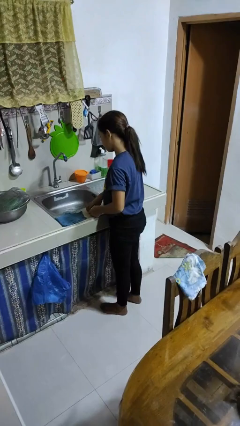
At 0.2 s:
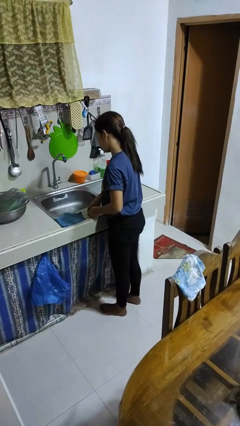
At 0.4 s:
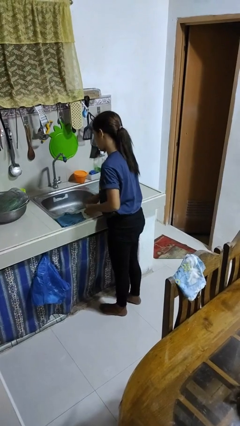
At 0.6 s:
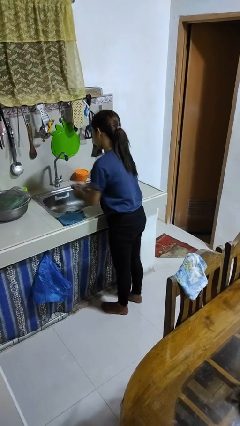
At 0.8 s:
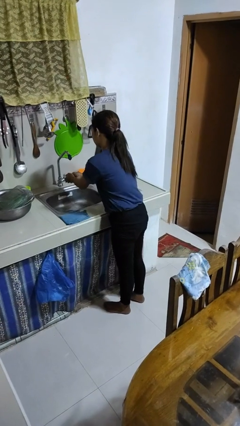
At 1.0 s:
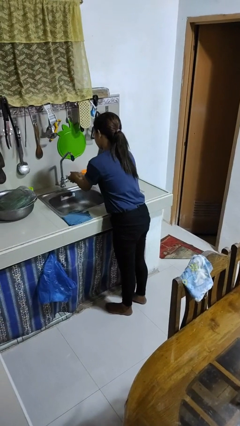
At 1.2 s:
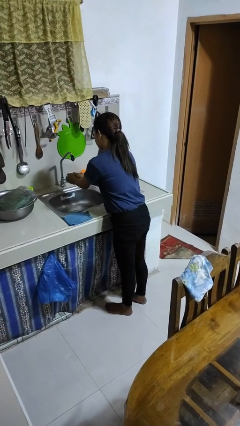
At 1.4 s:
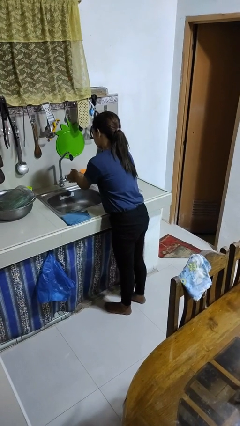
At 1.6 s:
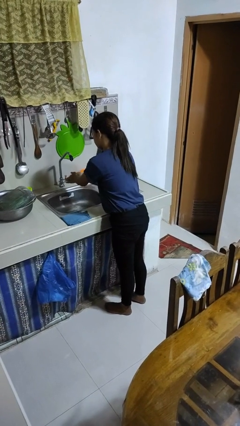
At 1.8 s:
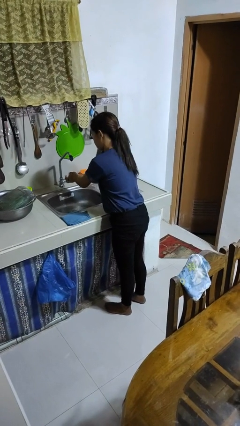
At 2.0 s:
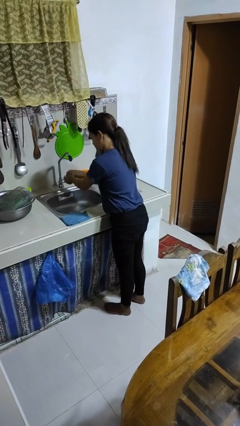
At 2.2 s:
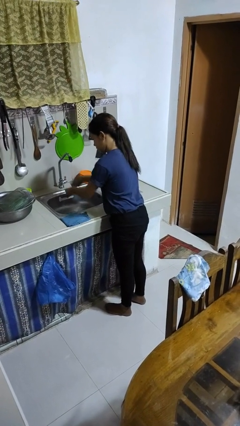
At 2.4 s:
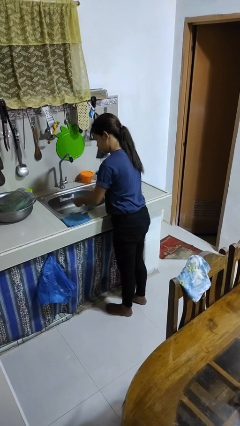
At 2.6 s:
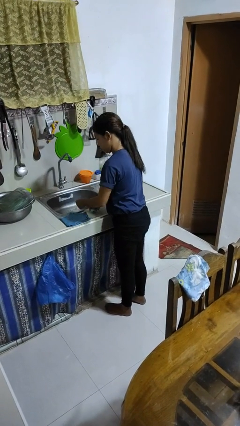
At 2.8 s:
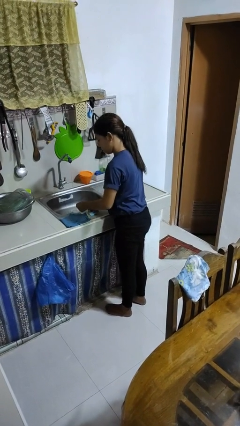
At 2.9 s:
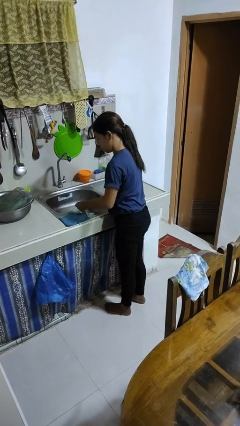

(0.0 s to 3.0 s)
person washes hands

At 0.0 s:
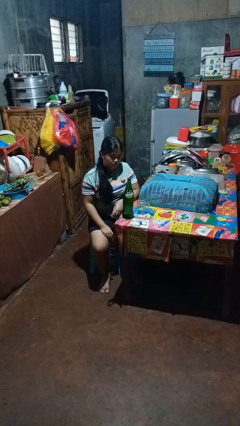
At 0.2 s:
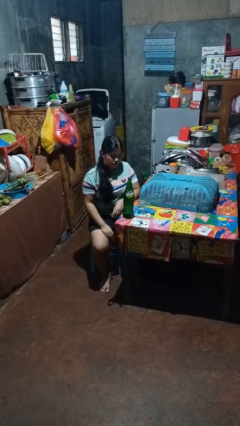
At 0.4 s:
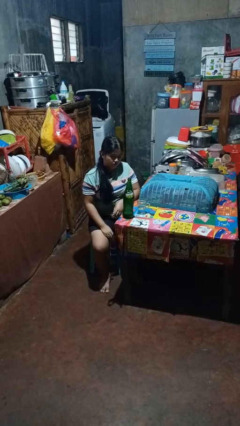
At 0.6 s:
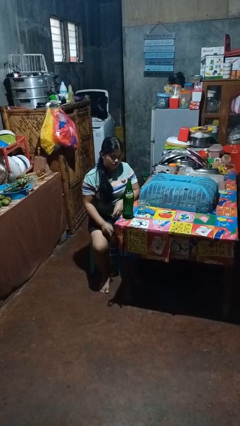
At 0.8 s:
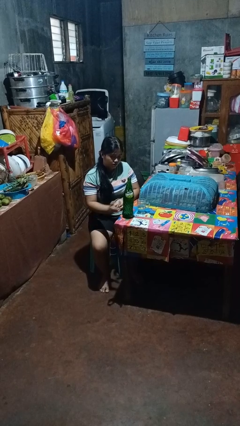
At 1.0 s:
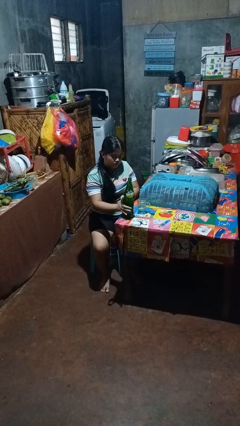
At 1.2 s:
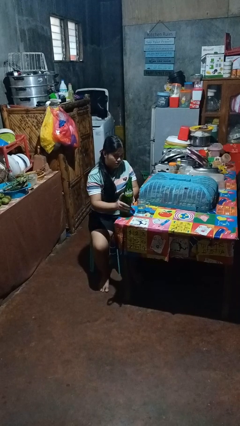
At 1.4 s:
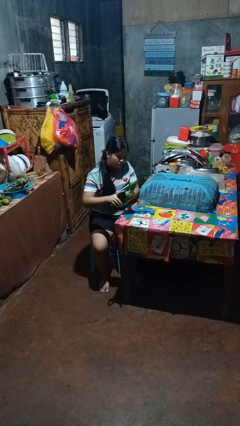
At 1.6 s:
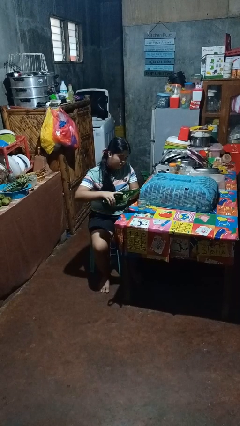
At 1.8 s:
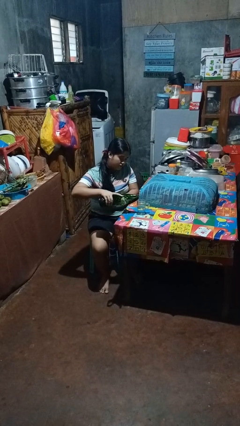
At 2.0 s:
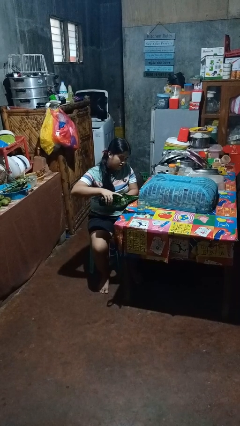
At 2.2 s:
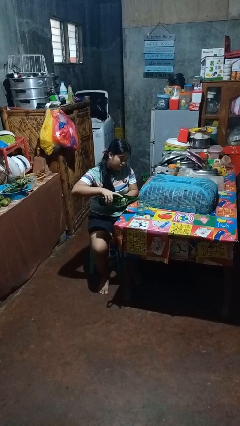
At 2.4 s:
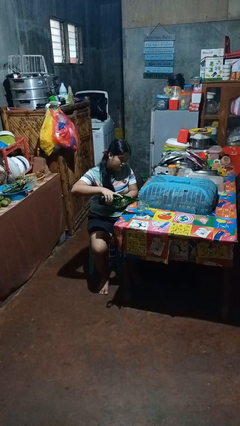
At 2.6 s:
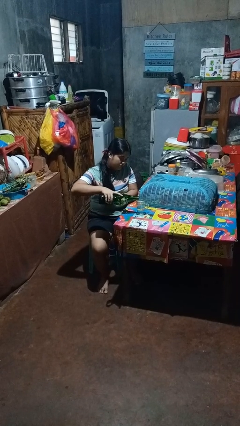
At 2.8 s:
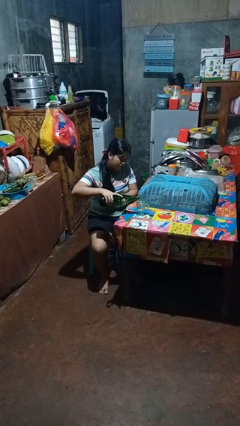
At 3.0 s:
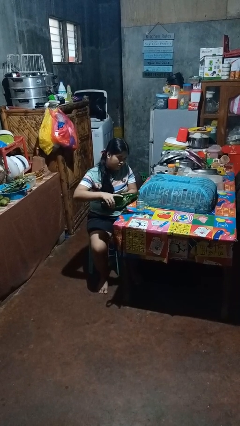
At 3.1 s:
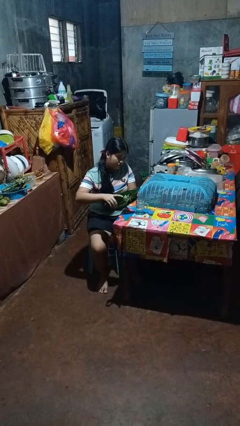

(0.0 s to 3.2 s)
person pours liquid into cup

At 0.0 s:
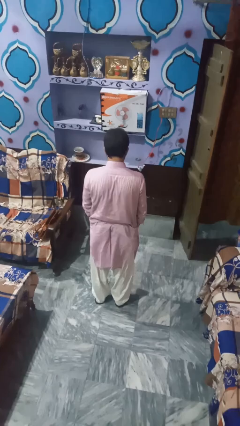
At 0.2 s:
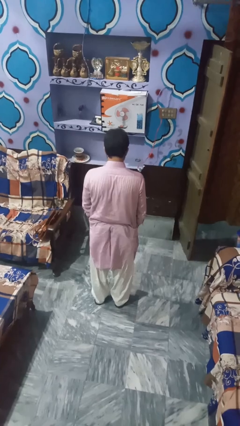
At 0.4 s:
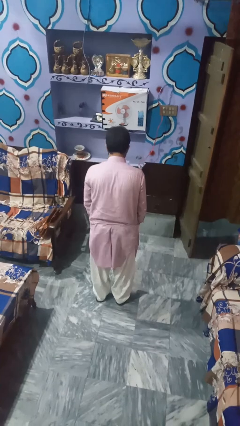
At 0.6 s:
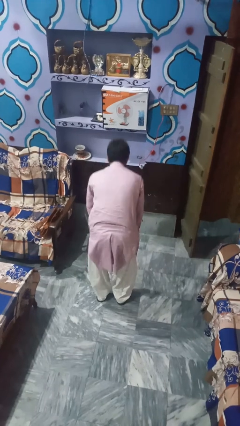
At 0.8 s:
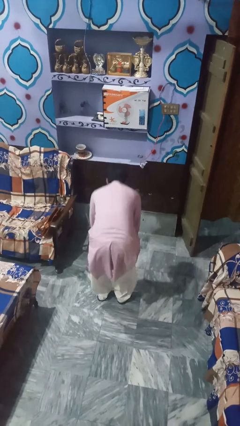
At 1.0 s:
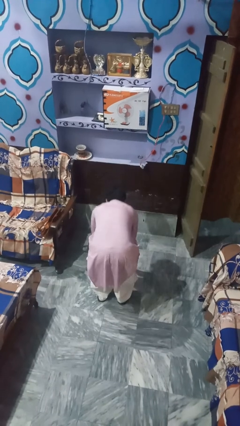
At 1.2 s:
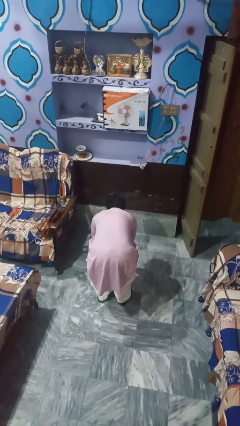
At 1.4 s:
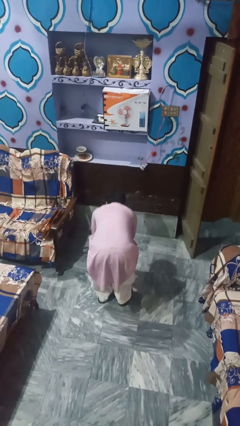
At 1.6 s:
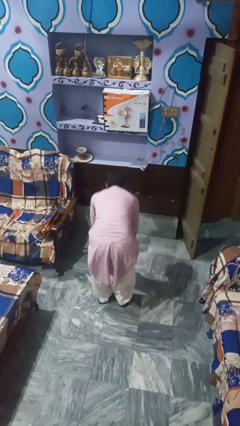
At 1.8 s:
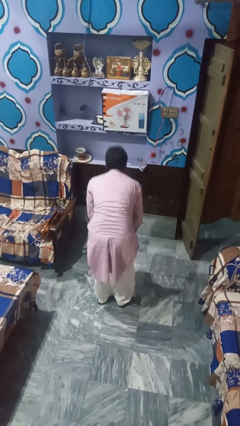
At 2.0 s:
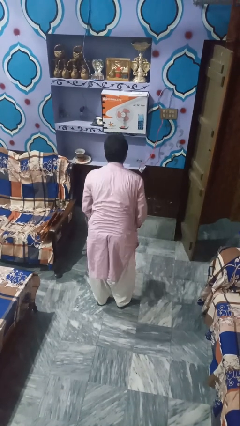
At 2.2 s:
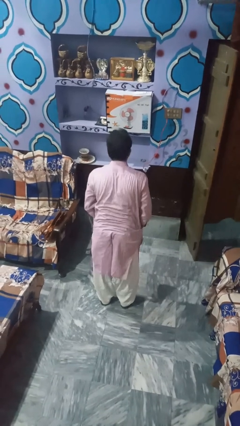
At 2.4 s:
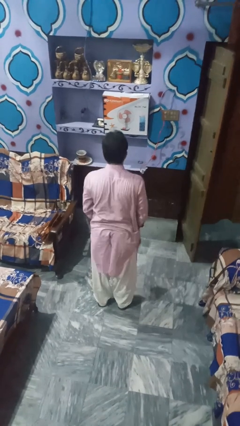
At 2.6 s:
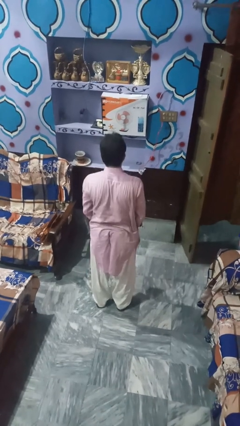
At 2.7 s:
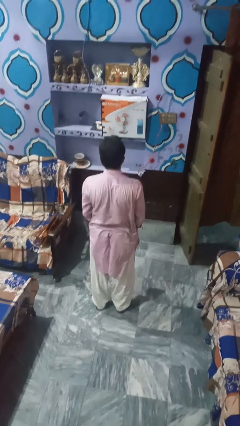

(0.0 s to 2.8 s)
person picks up object from floor

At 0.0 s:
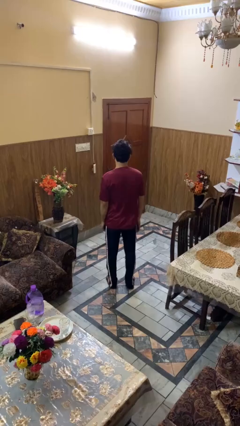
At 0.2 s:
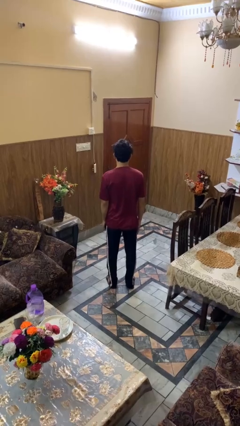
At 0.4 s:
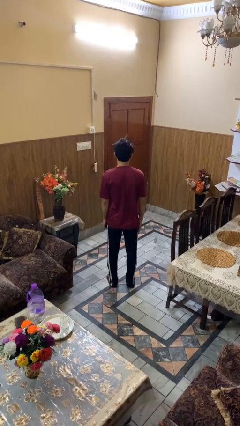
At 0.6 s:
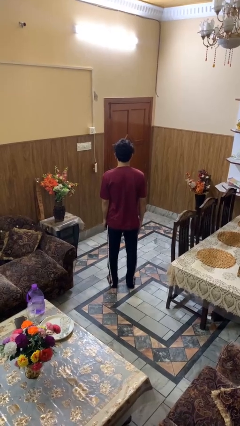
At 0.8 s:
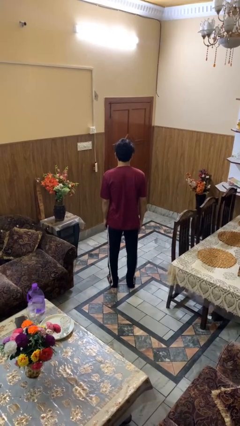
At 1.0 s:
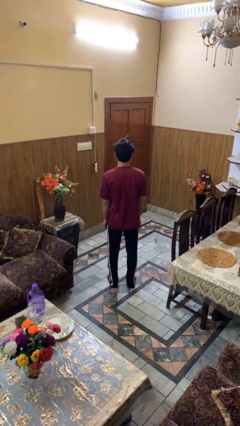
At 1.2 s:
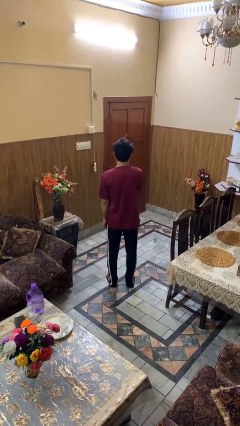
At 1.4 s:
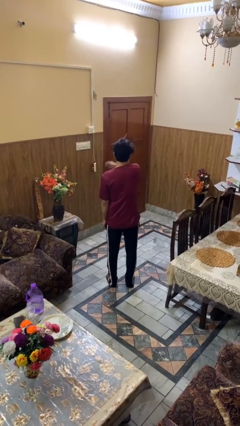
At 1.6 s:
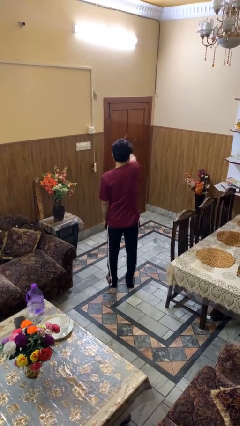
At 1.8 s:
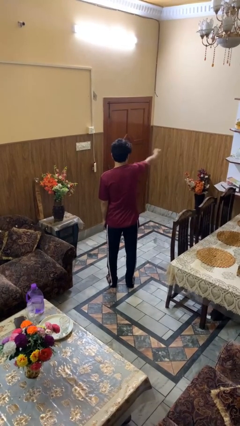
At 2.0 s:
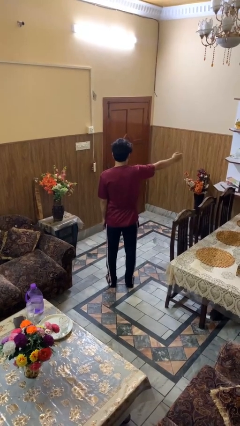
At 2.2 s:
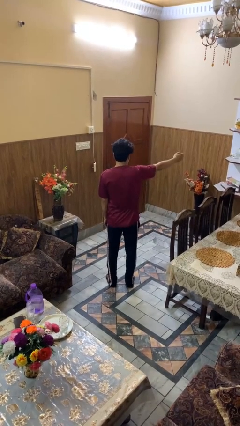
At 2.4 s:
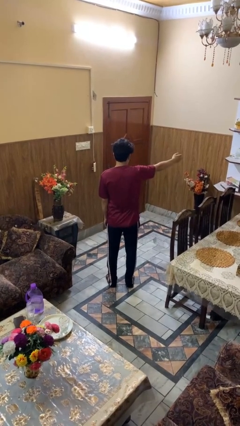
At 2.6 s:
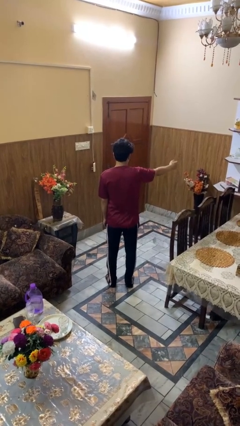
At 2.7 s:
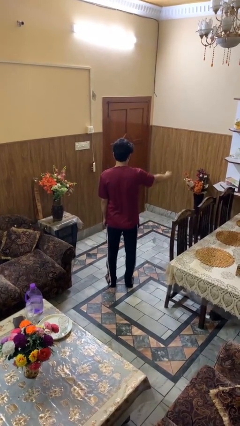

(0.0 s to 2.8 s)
person gestures swipe right

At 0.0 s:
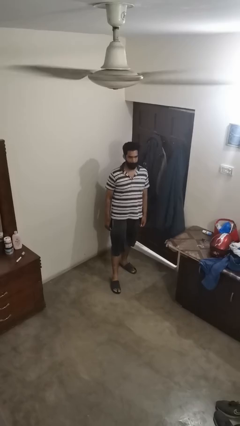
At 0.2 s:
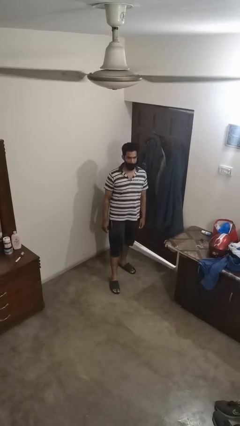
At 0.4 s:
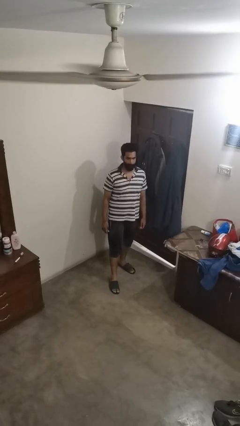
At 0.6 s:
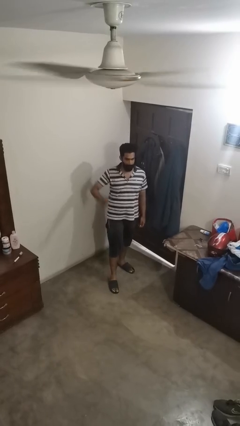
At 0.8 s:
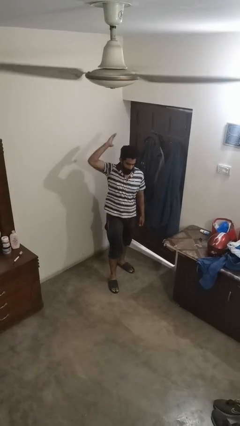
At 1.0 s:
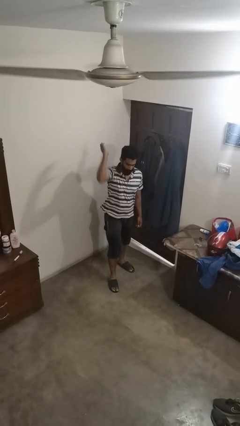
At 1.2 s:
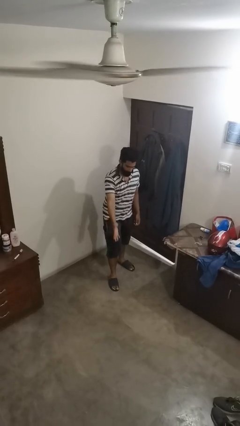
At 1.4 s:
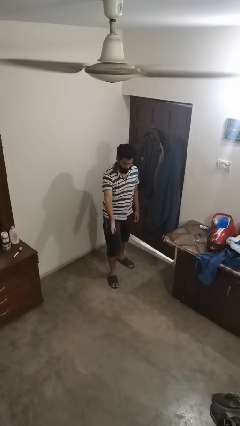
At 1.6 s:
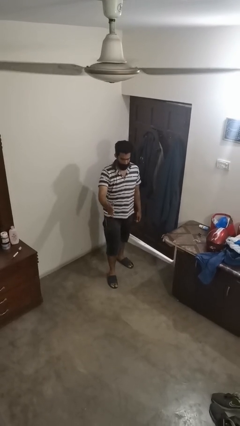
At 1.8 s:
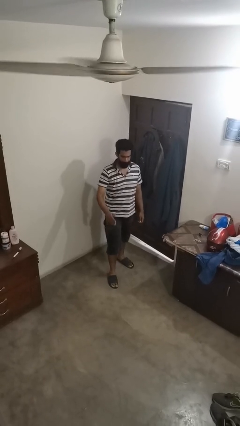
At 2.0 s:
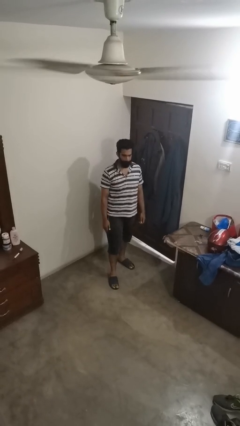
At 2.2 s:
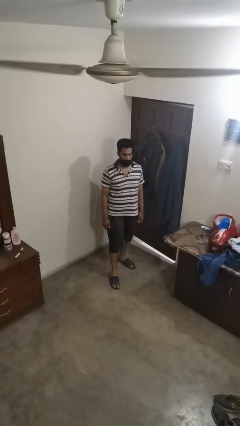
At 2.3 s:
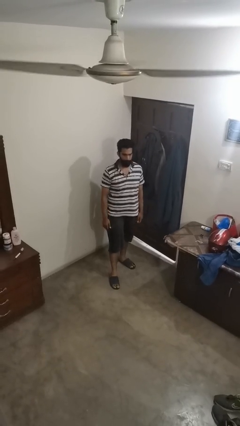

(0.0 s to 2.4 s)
person karate chop

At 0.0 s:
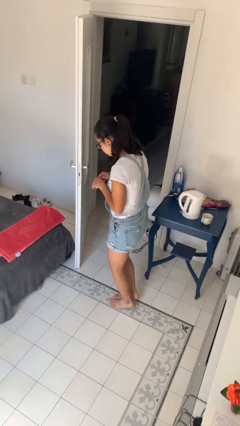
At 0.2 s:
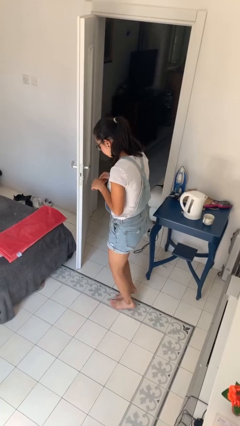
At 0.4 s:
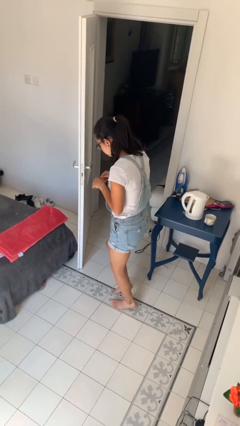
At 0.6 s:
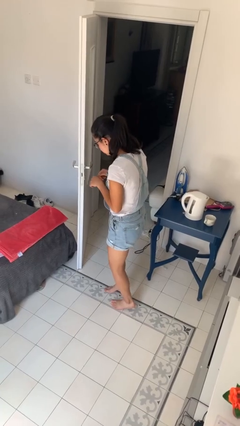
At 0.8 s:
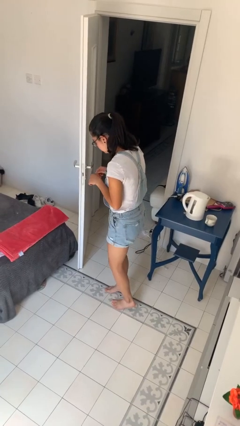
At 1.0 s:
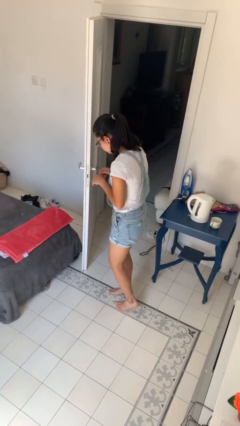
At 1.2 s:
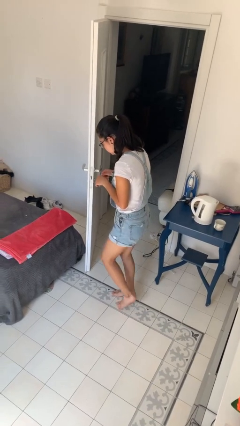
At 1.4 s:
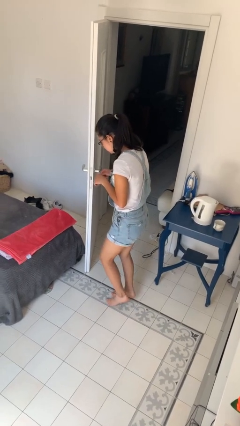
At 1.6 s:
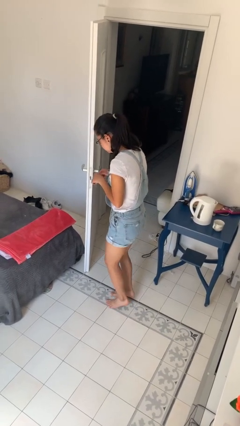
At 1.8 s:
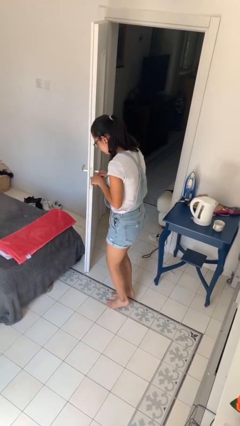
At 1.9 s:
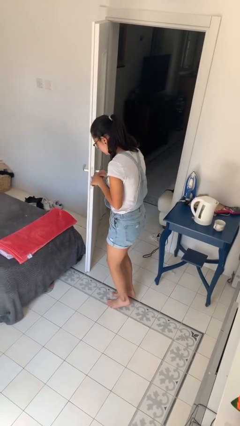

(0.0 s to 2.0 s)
person walks tiptoe

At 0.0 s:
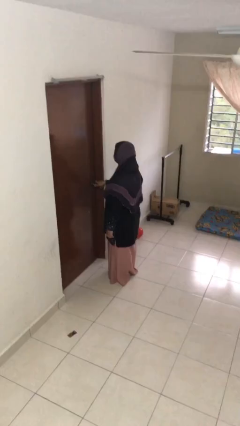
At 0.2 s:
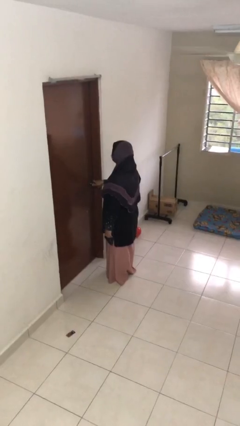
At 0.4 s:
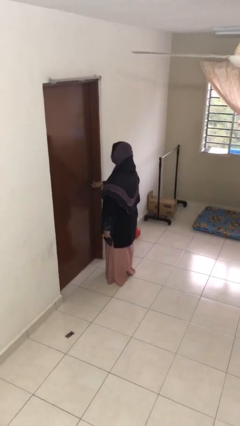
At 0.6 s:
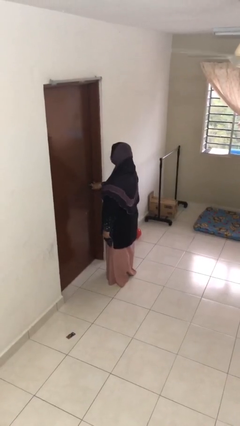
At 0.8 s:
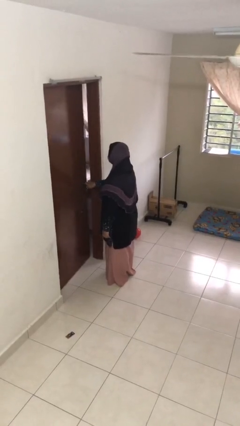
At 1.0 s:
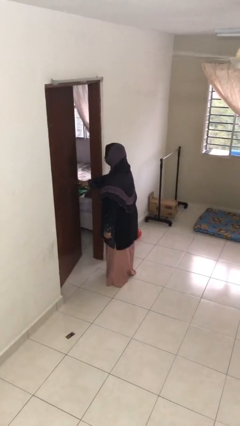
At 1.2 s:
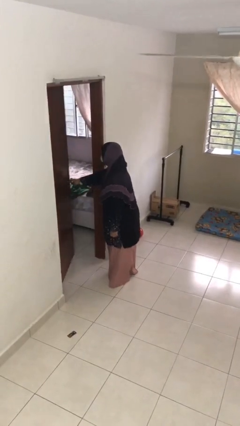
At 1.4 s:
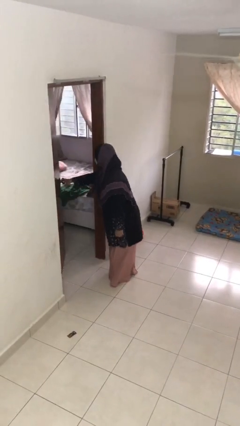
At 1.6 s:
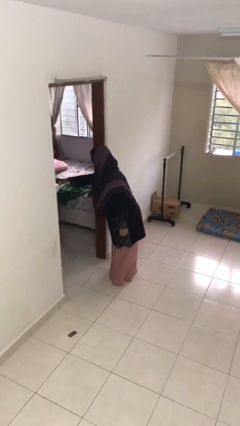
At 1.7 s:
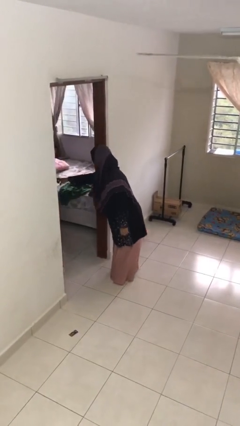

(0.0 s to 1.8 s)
person opens facility door
